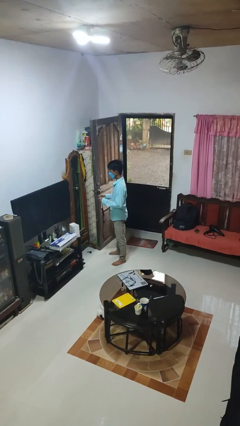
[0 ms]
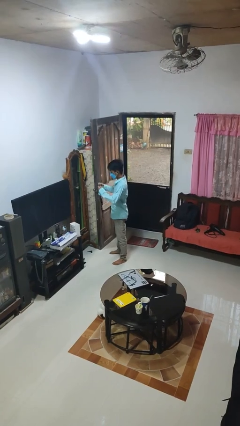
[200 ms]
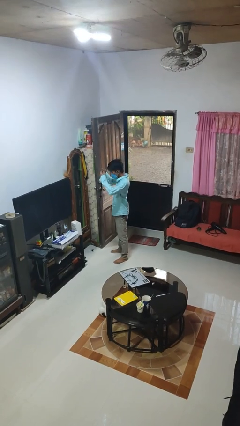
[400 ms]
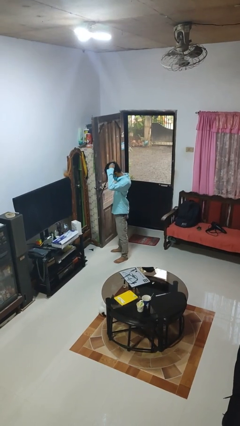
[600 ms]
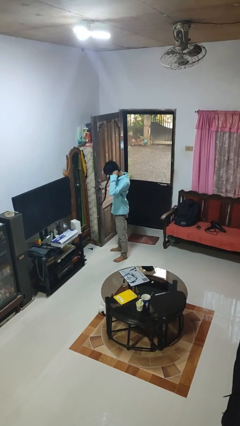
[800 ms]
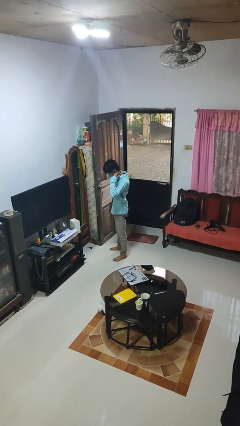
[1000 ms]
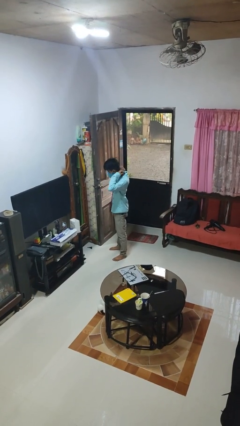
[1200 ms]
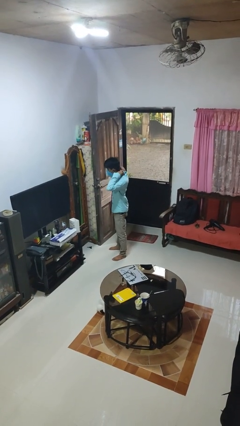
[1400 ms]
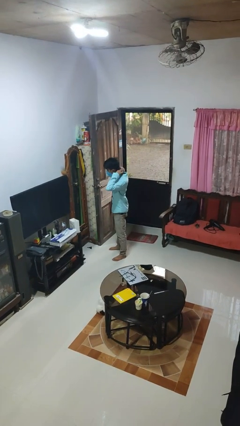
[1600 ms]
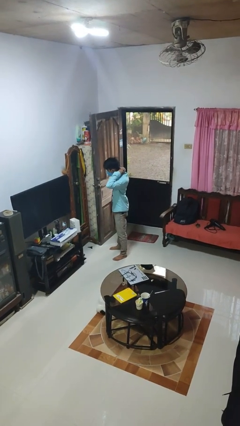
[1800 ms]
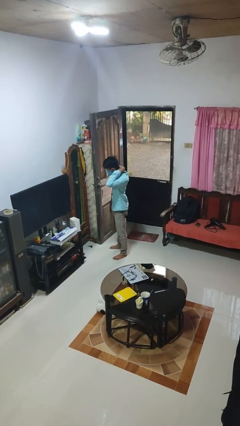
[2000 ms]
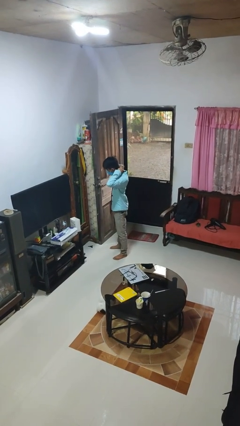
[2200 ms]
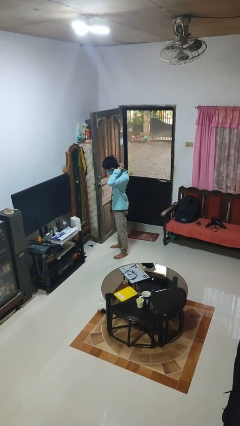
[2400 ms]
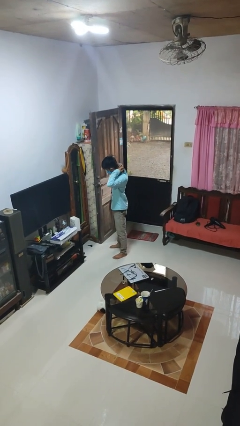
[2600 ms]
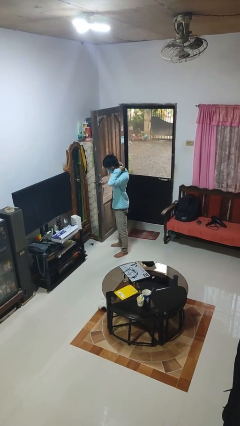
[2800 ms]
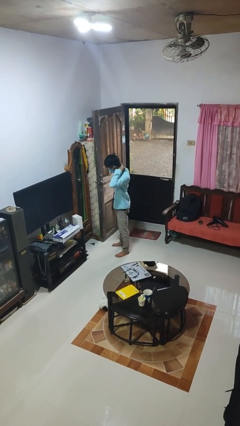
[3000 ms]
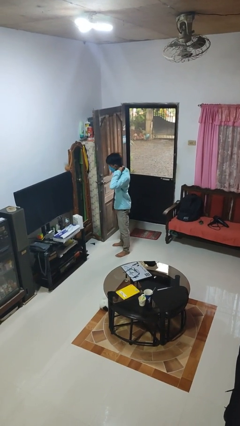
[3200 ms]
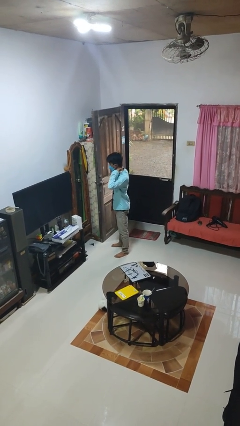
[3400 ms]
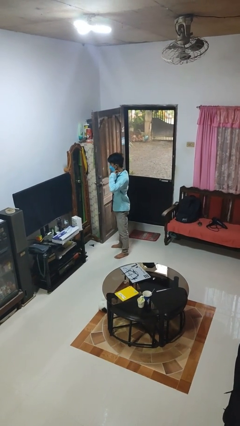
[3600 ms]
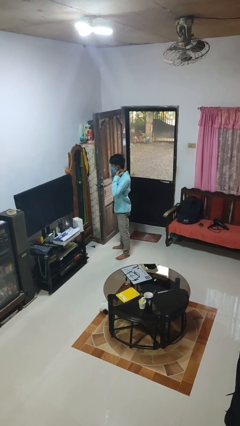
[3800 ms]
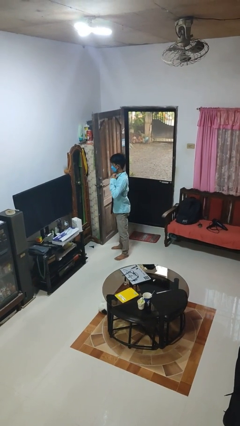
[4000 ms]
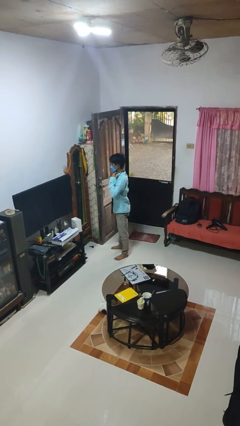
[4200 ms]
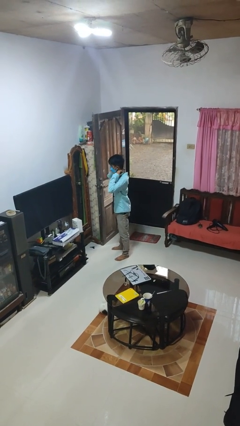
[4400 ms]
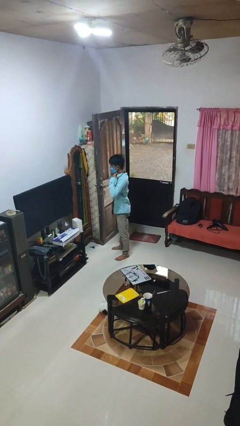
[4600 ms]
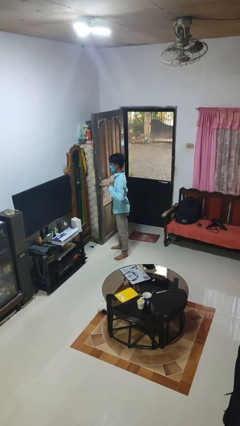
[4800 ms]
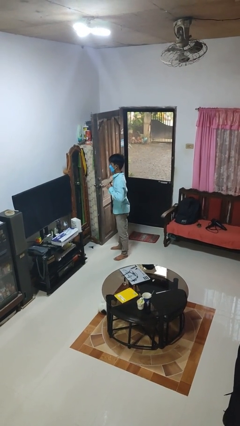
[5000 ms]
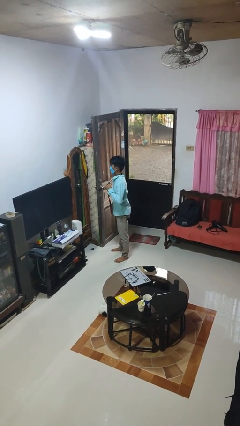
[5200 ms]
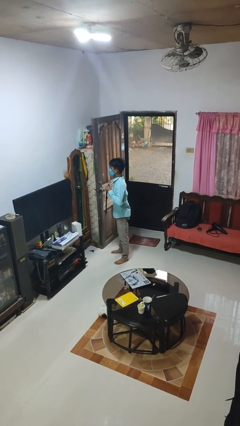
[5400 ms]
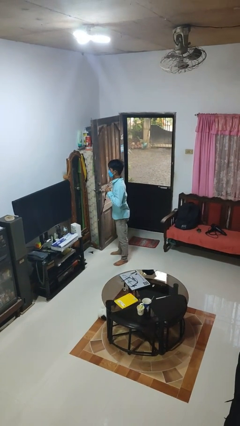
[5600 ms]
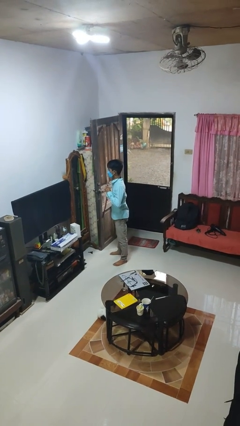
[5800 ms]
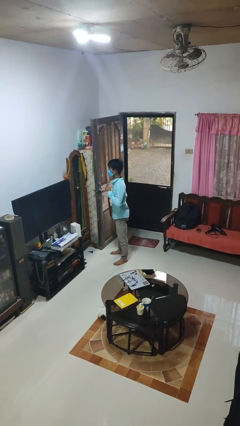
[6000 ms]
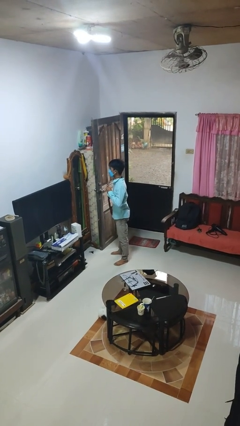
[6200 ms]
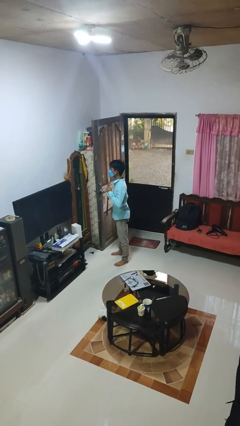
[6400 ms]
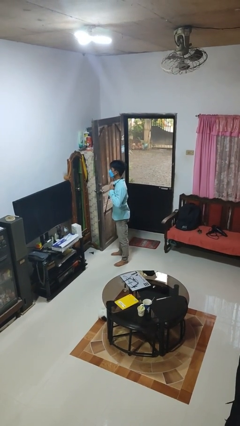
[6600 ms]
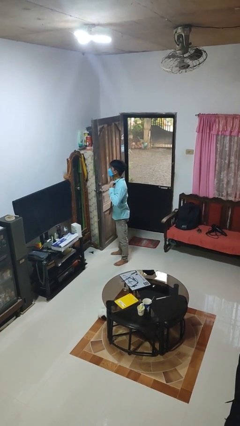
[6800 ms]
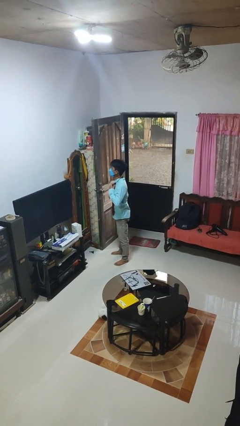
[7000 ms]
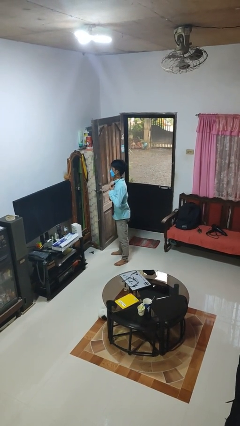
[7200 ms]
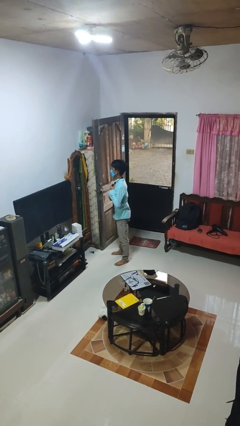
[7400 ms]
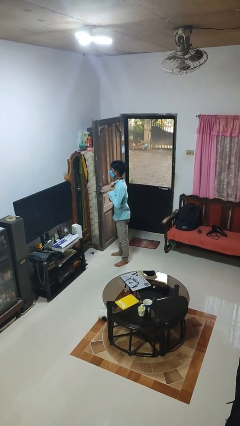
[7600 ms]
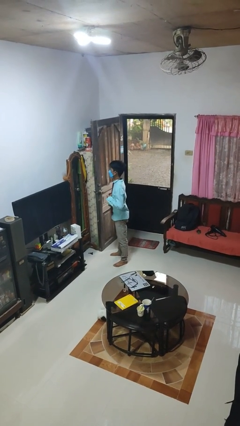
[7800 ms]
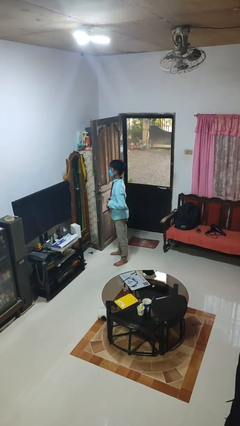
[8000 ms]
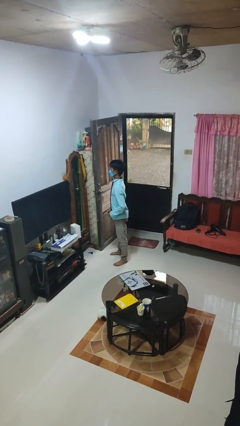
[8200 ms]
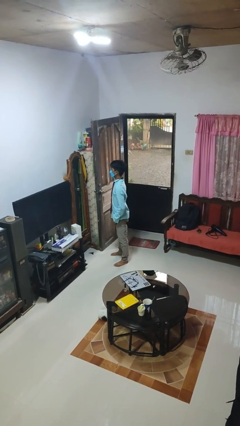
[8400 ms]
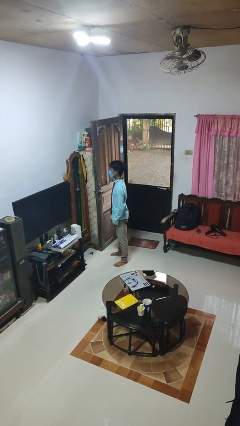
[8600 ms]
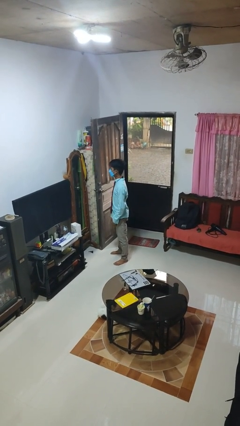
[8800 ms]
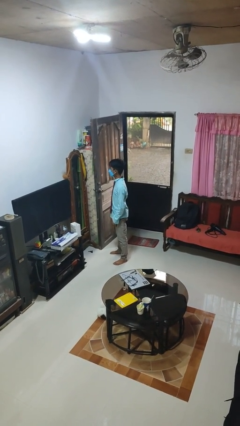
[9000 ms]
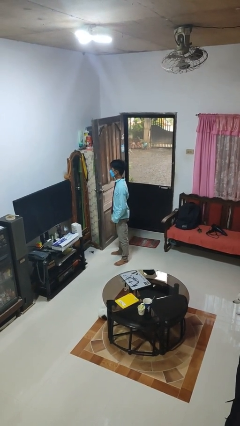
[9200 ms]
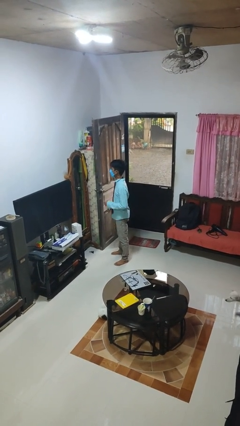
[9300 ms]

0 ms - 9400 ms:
person puts on necktie

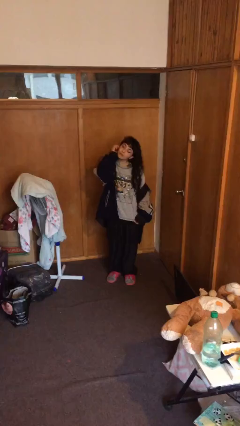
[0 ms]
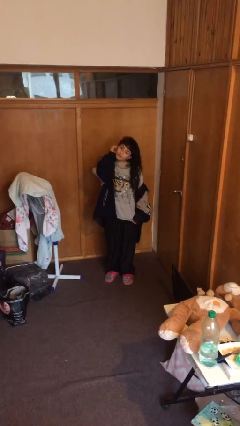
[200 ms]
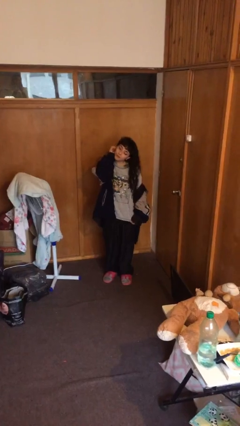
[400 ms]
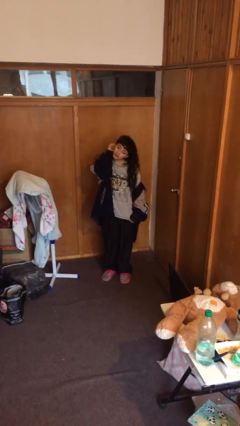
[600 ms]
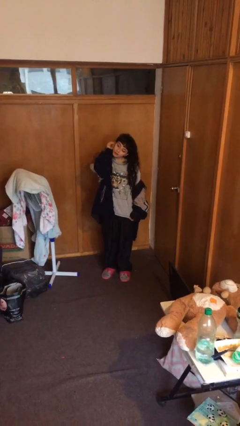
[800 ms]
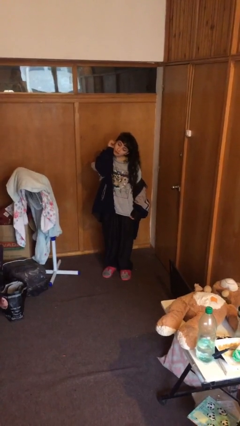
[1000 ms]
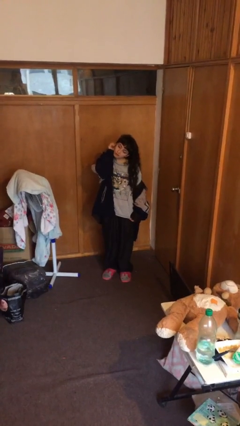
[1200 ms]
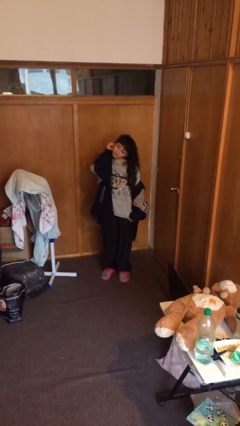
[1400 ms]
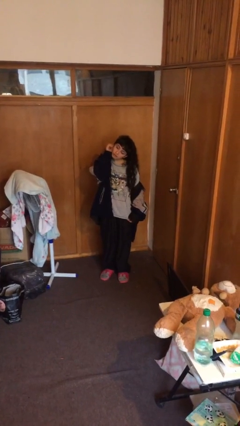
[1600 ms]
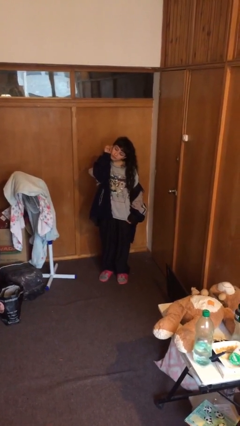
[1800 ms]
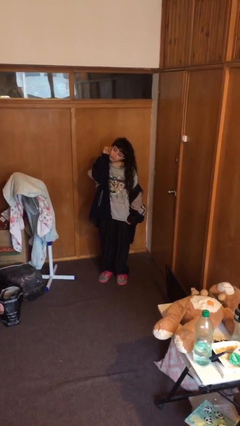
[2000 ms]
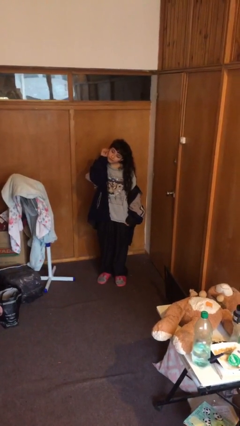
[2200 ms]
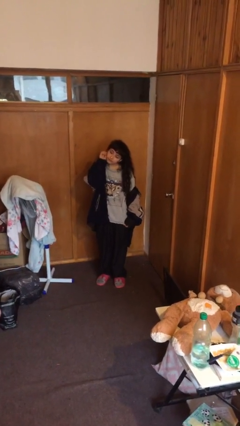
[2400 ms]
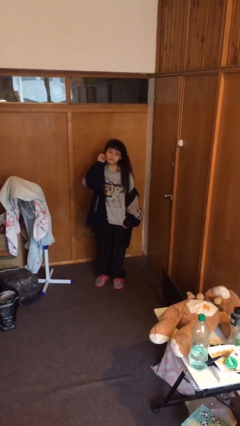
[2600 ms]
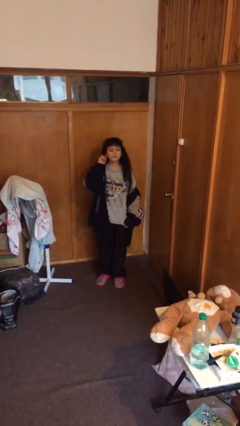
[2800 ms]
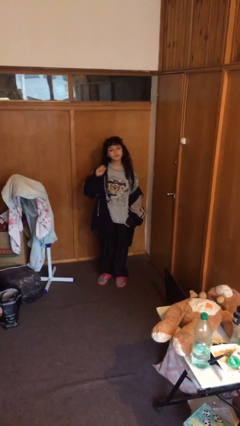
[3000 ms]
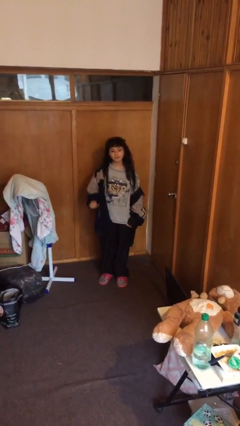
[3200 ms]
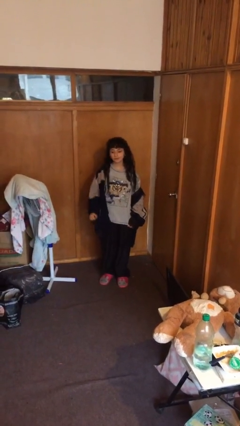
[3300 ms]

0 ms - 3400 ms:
person touches earlobe

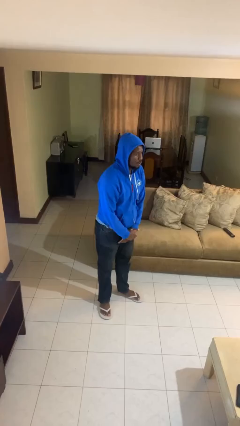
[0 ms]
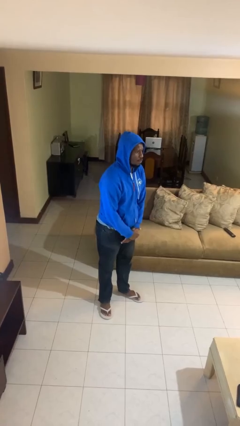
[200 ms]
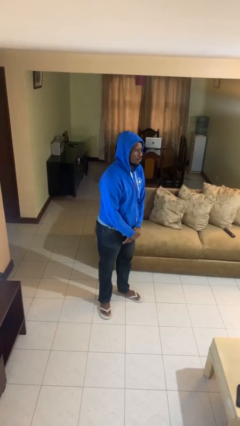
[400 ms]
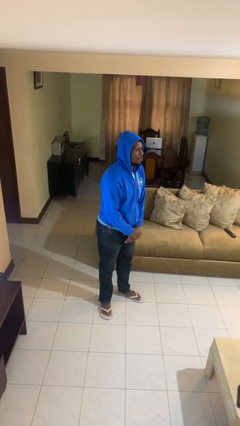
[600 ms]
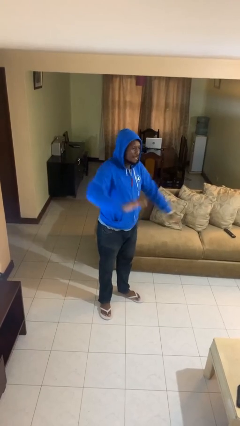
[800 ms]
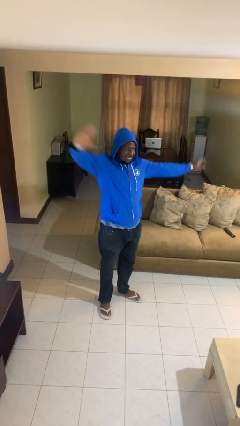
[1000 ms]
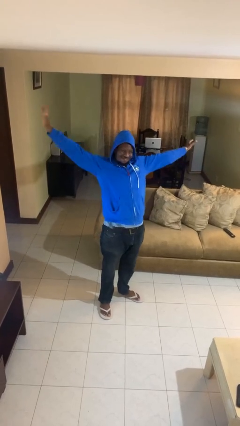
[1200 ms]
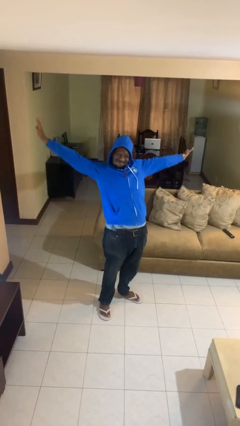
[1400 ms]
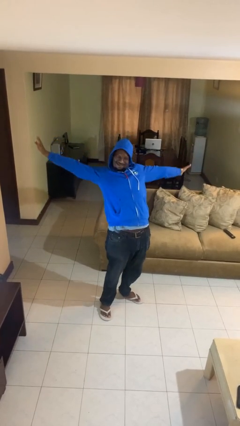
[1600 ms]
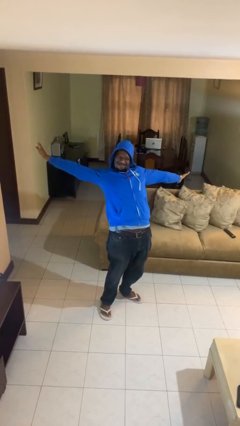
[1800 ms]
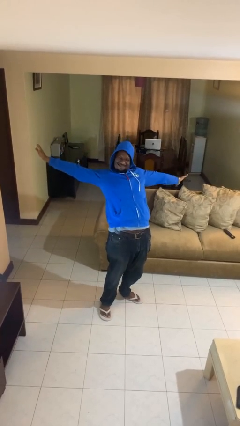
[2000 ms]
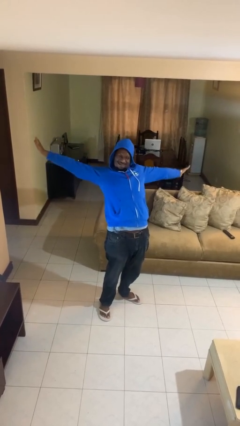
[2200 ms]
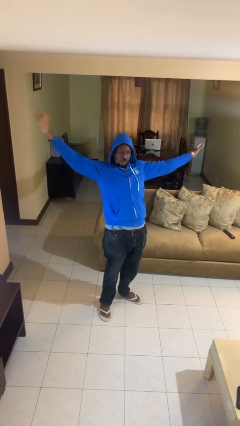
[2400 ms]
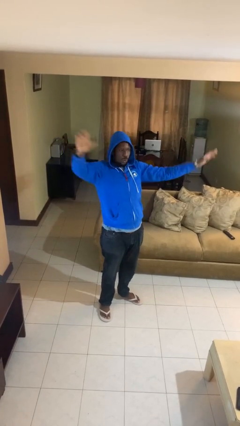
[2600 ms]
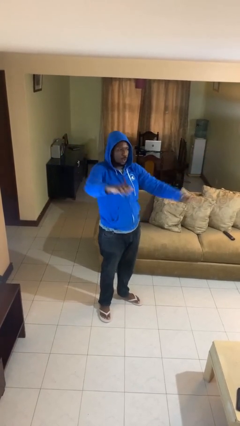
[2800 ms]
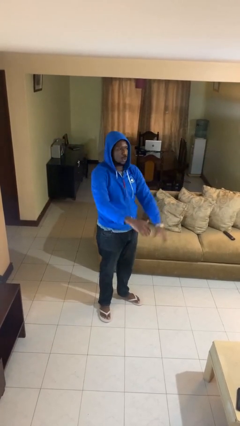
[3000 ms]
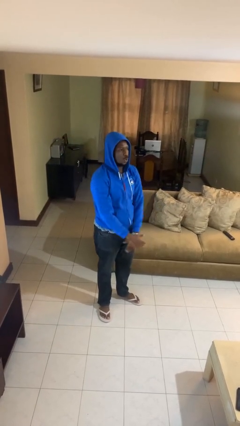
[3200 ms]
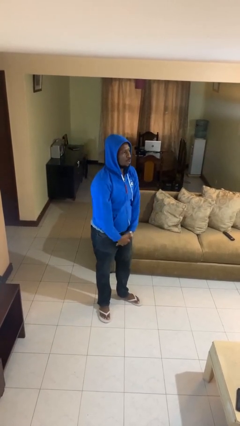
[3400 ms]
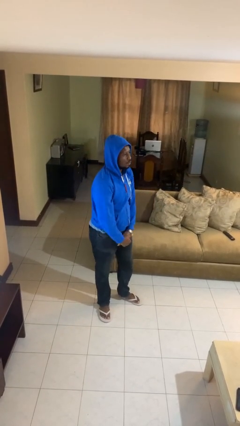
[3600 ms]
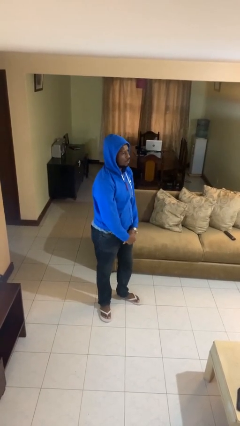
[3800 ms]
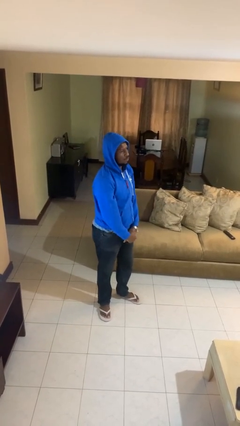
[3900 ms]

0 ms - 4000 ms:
person stretches arms to side

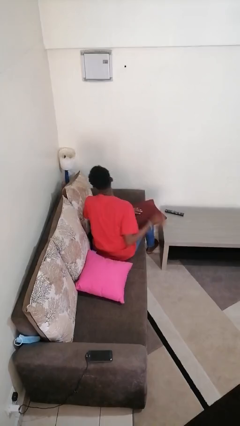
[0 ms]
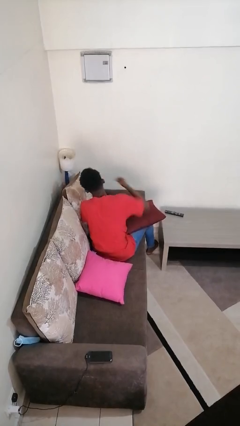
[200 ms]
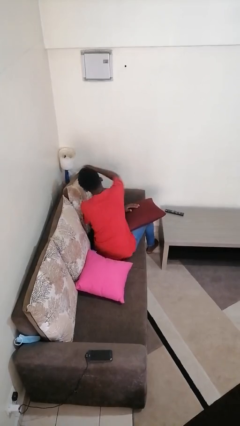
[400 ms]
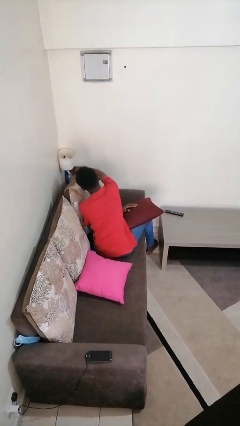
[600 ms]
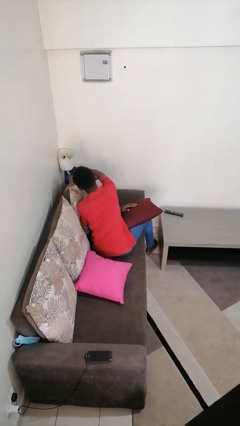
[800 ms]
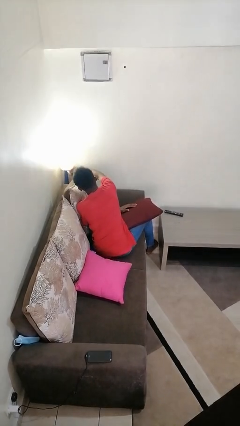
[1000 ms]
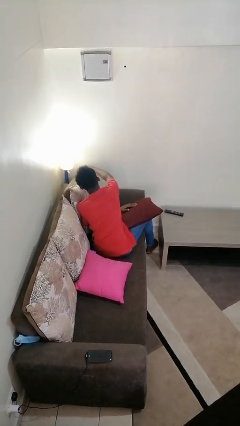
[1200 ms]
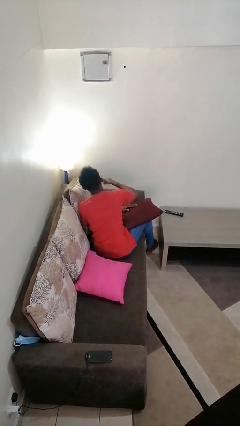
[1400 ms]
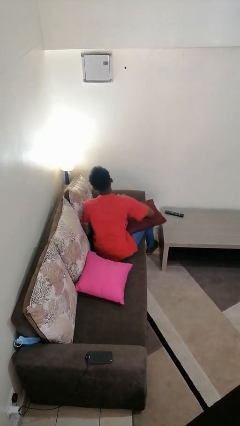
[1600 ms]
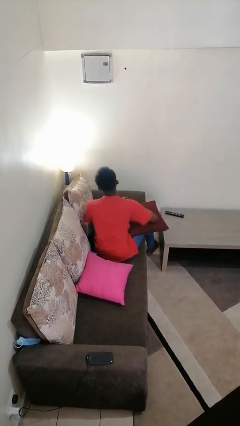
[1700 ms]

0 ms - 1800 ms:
person turns on lamp
